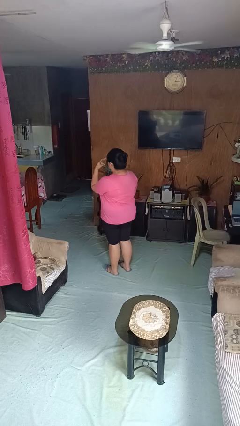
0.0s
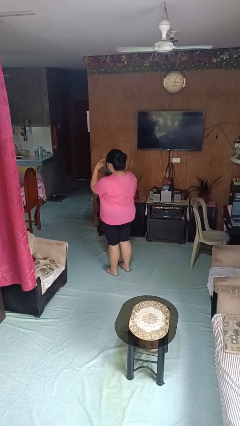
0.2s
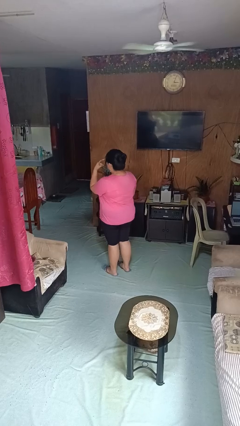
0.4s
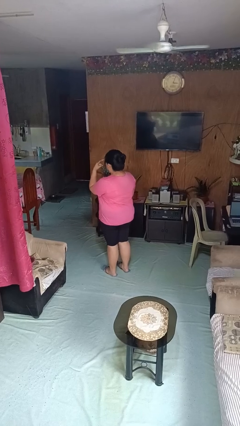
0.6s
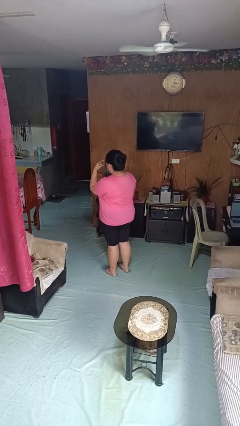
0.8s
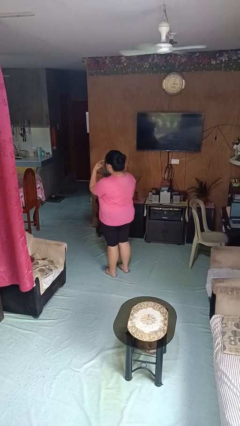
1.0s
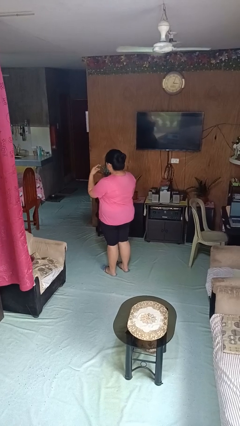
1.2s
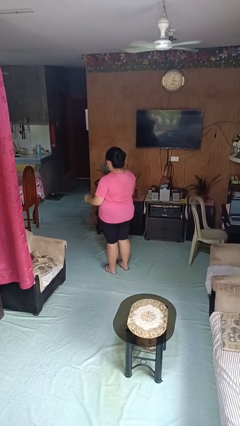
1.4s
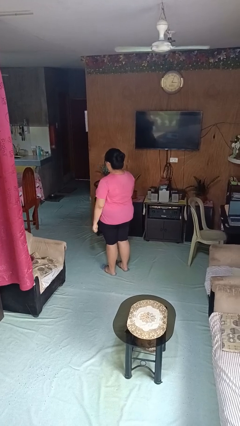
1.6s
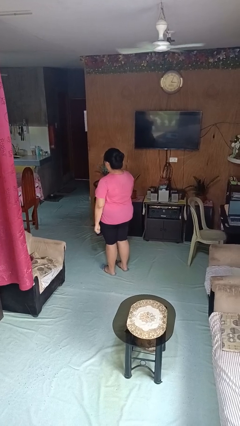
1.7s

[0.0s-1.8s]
person gestures watch closely

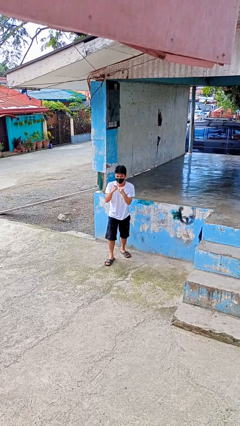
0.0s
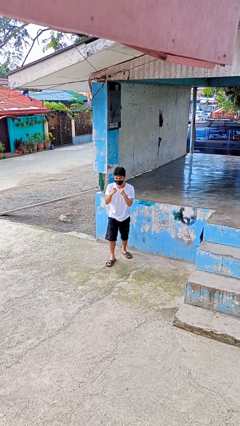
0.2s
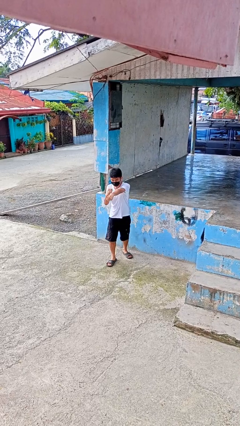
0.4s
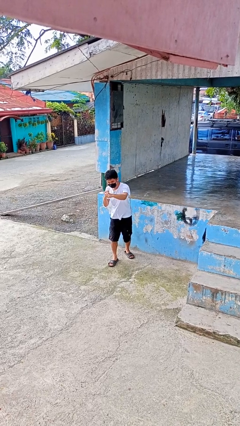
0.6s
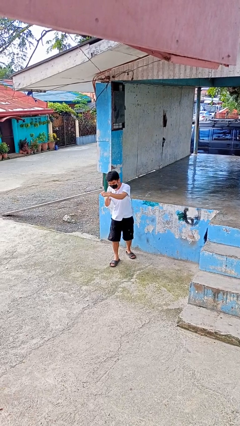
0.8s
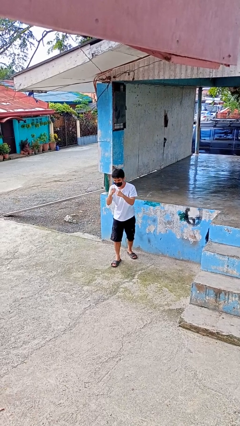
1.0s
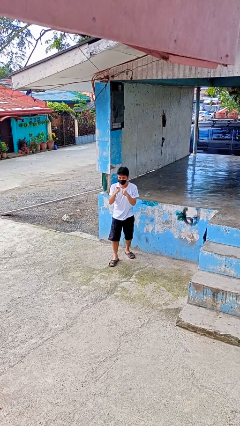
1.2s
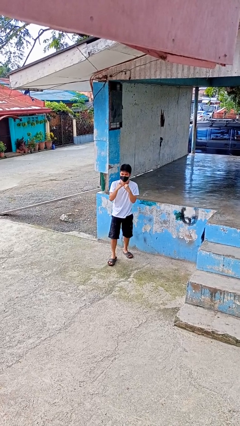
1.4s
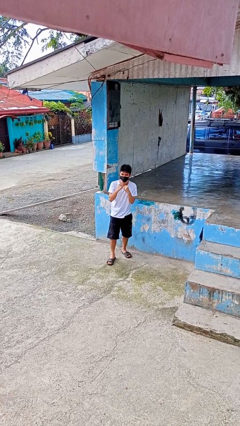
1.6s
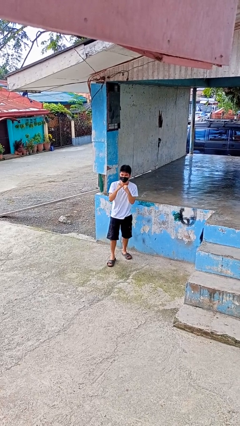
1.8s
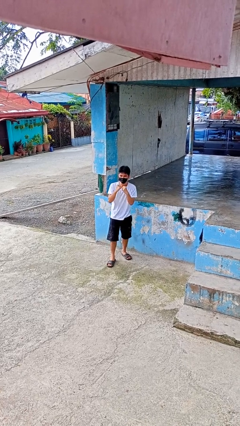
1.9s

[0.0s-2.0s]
person punches

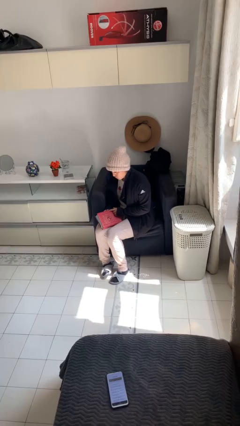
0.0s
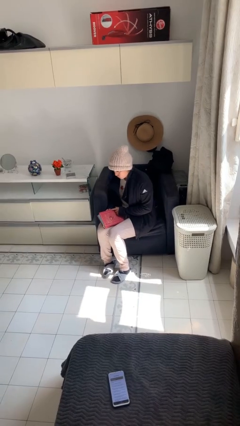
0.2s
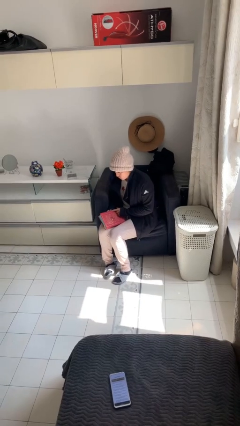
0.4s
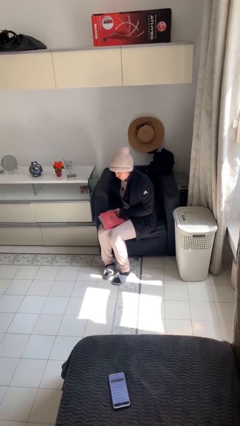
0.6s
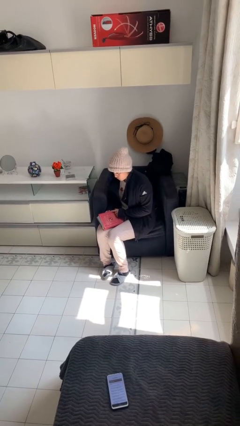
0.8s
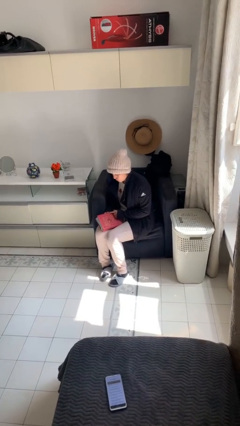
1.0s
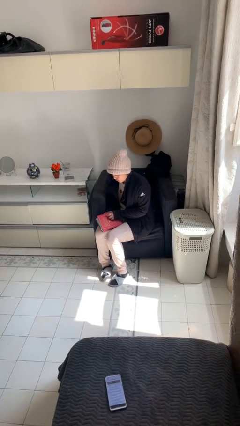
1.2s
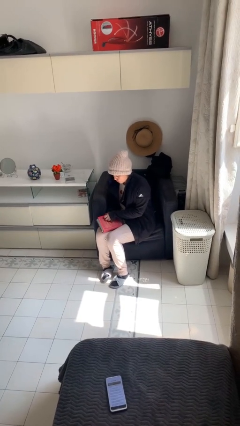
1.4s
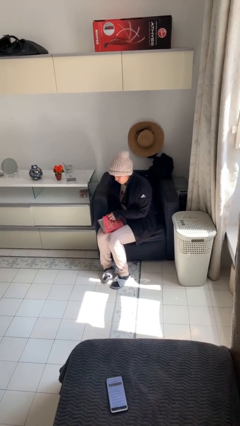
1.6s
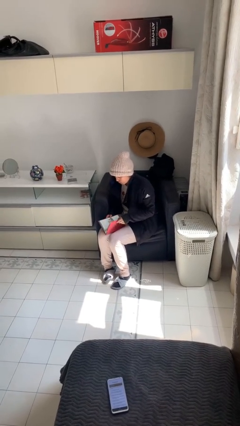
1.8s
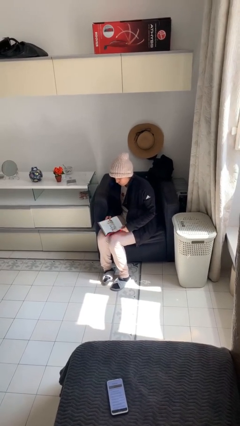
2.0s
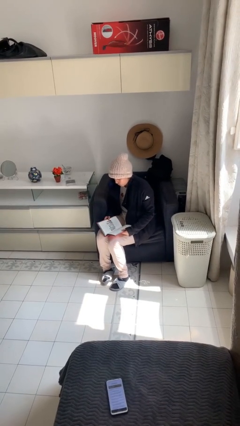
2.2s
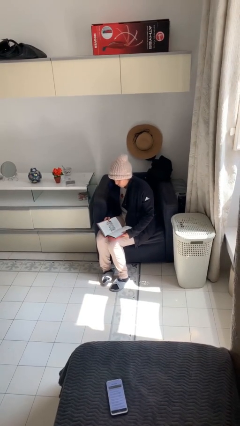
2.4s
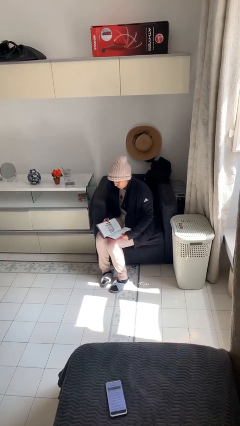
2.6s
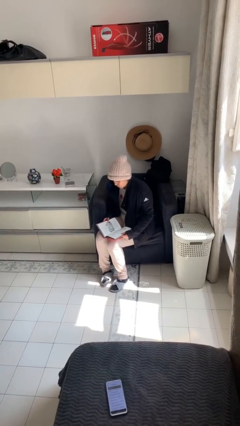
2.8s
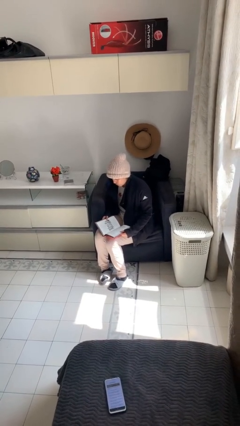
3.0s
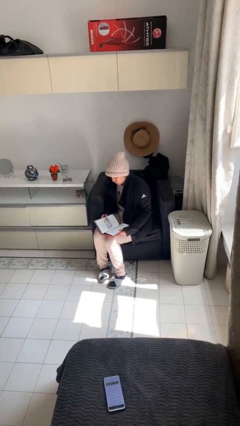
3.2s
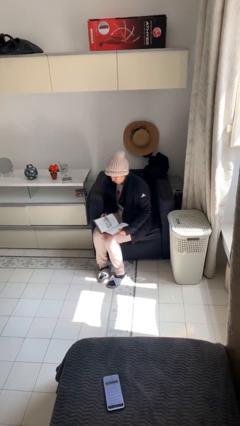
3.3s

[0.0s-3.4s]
person reads book

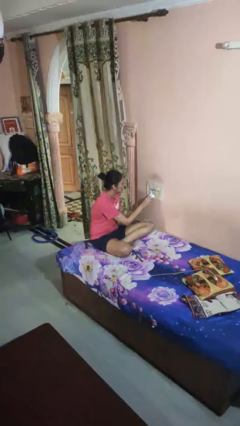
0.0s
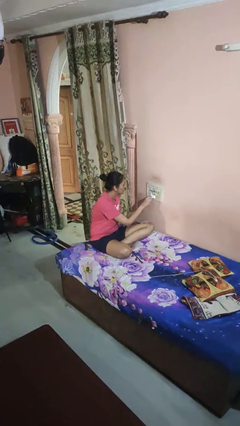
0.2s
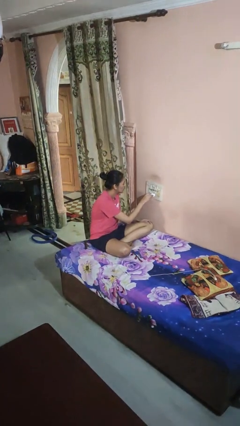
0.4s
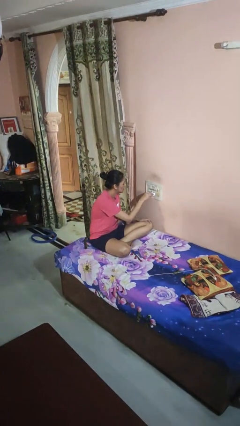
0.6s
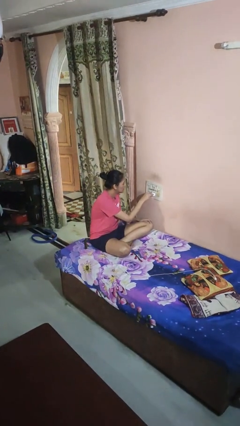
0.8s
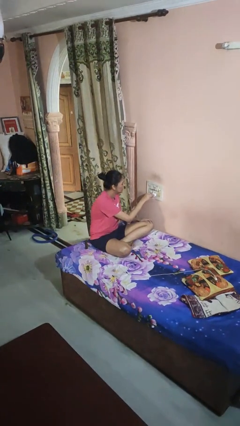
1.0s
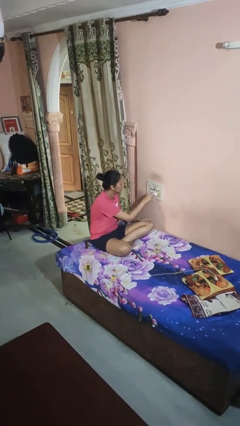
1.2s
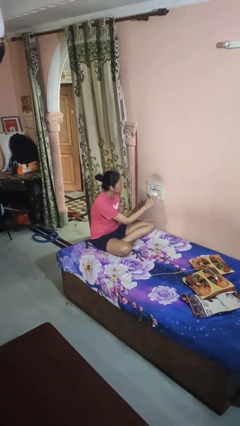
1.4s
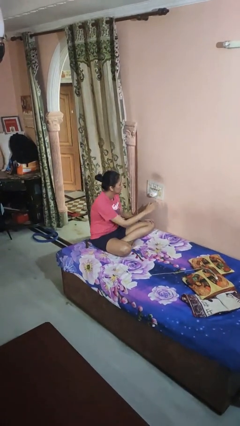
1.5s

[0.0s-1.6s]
person plugs into electrical socket

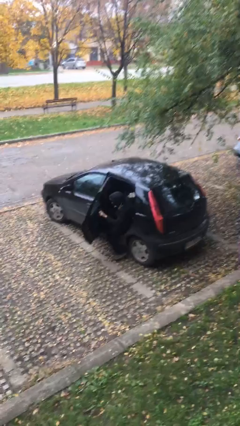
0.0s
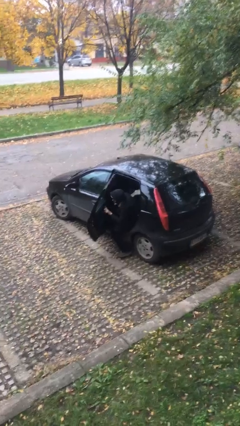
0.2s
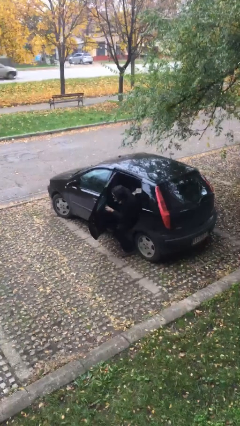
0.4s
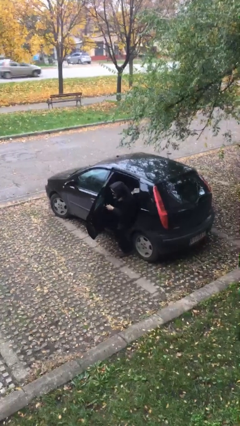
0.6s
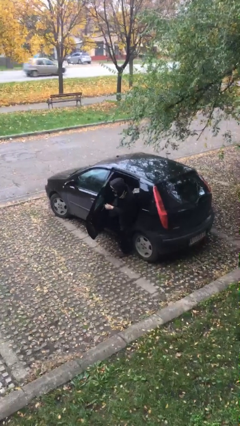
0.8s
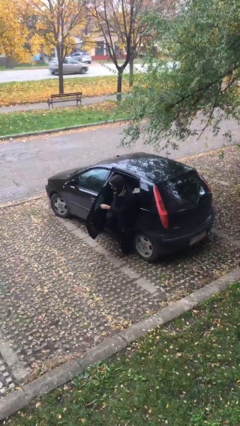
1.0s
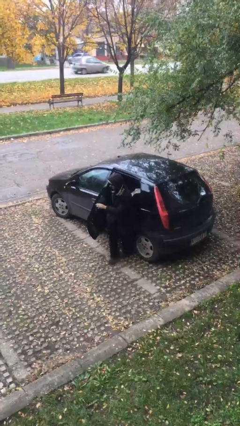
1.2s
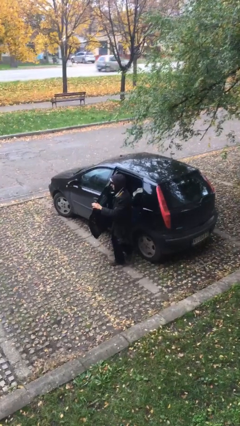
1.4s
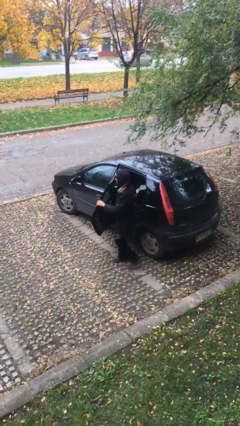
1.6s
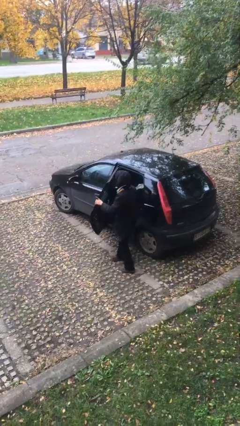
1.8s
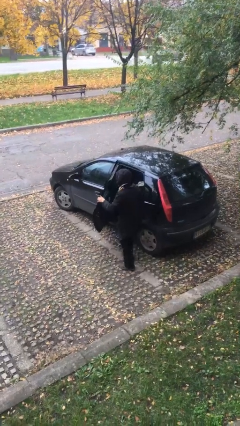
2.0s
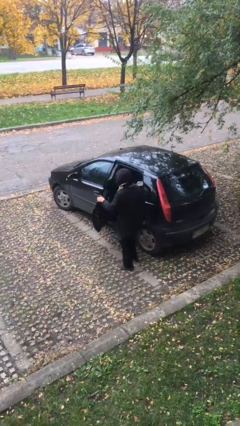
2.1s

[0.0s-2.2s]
person exits car

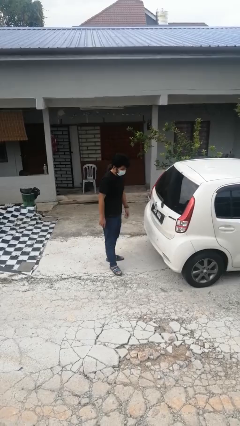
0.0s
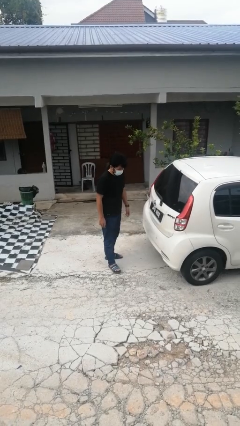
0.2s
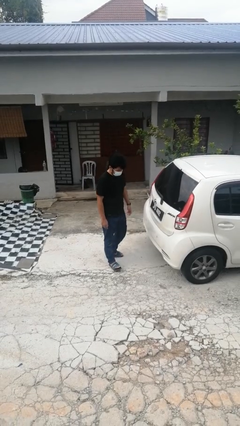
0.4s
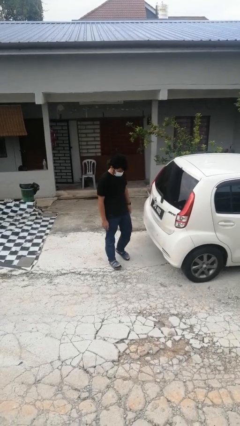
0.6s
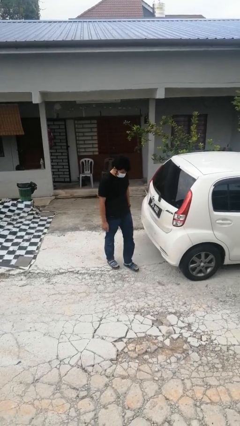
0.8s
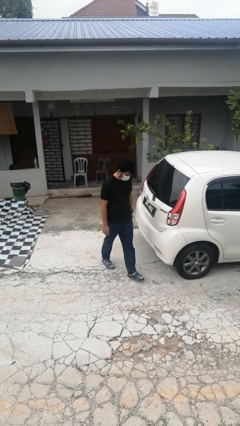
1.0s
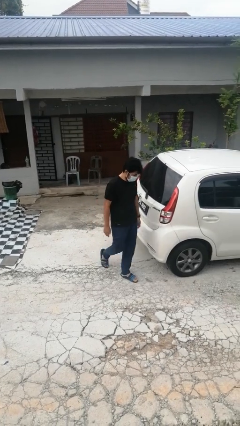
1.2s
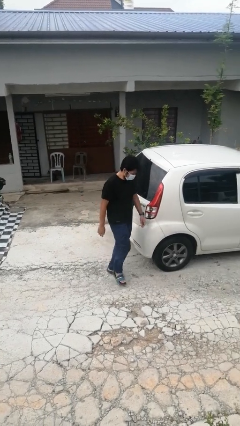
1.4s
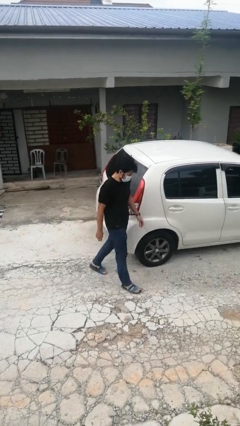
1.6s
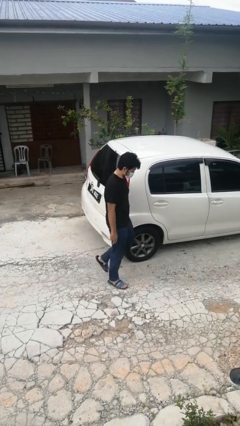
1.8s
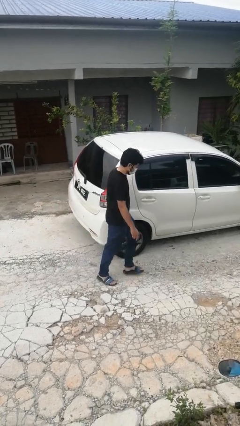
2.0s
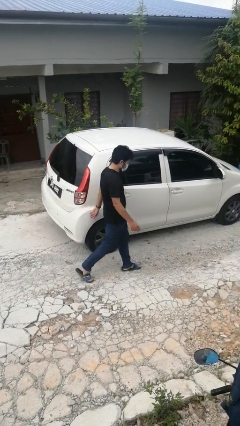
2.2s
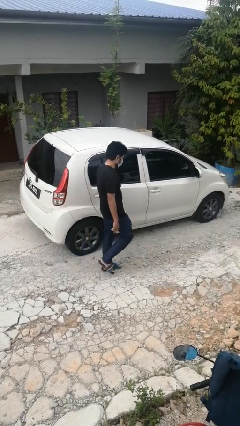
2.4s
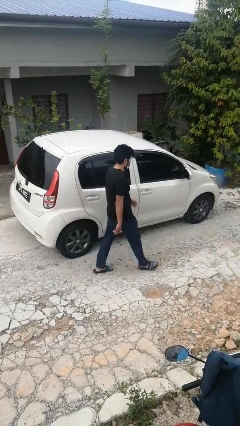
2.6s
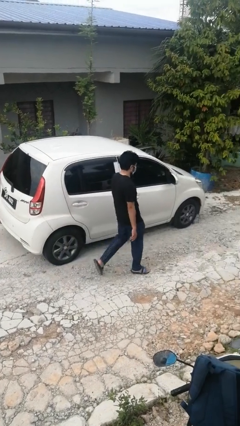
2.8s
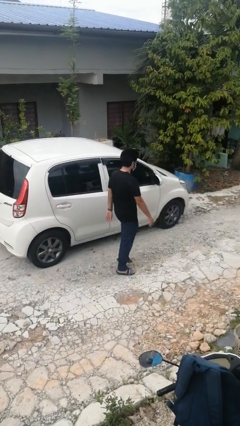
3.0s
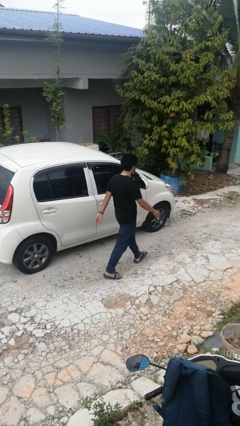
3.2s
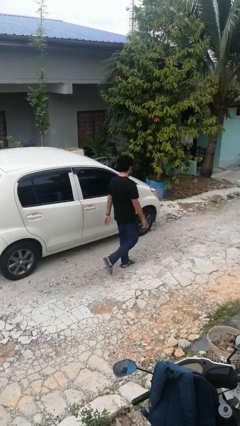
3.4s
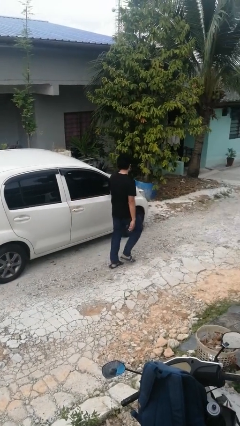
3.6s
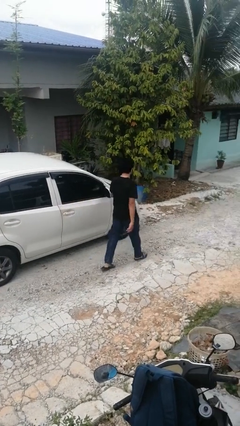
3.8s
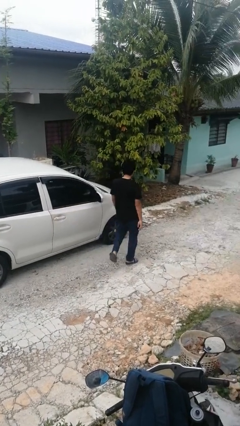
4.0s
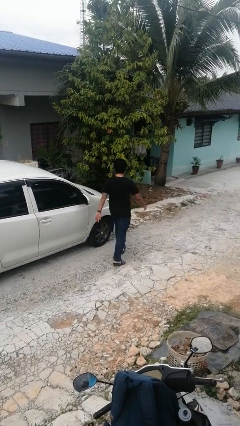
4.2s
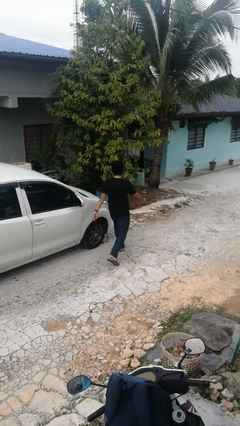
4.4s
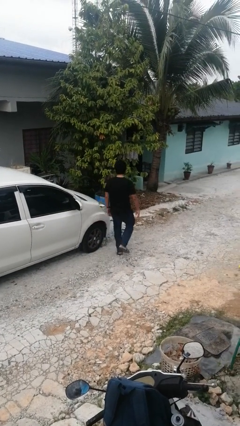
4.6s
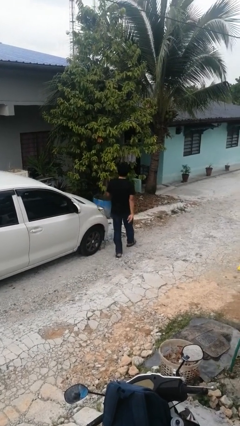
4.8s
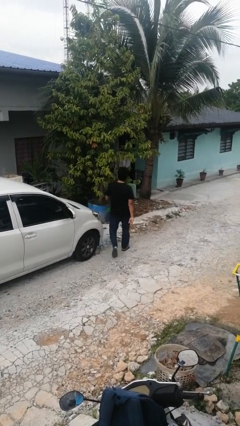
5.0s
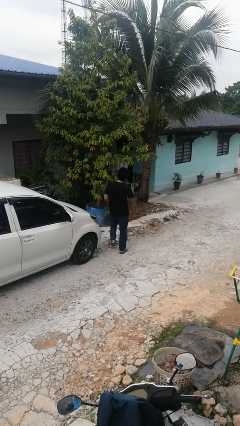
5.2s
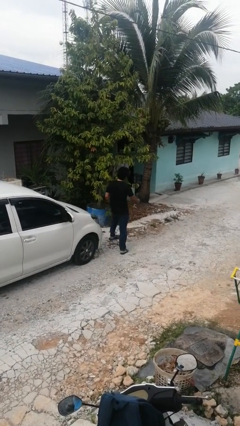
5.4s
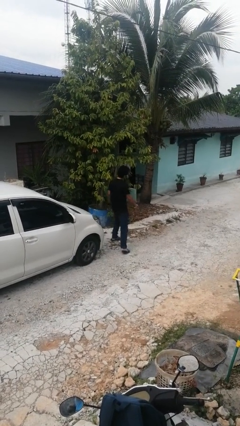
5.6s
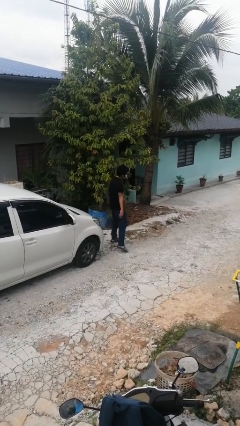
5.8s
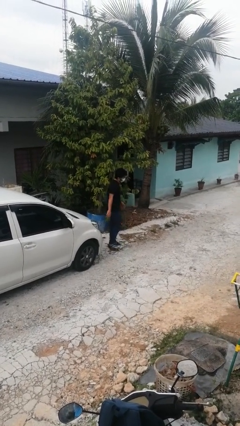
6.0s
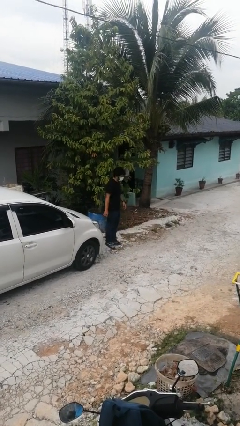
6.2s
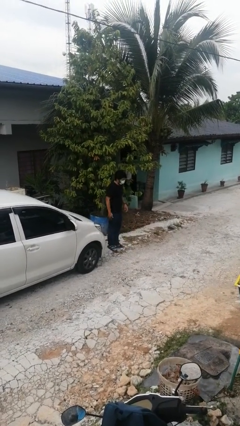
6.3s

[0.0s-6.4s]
person walks around car
